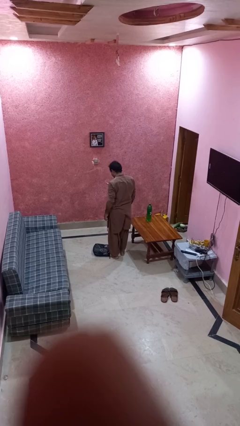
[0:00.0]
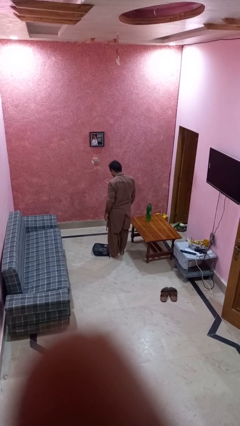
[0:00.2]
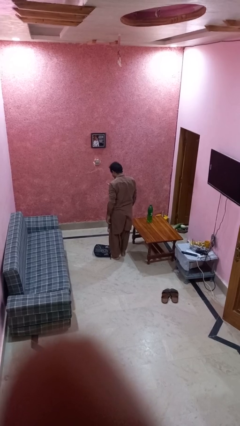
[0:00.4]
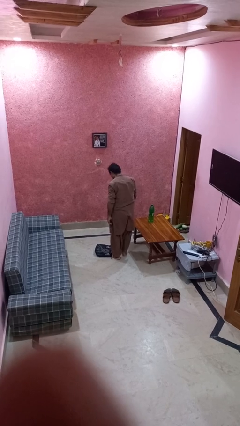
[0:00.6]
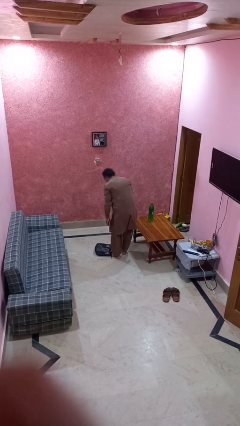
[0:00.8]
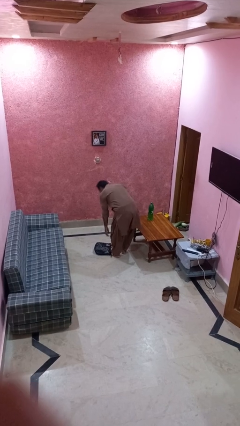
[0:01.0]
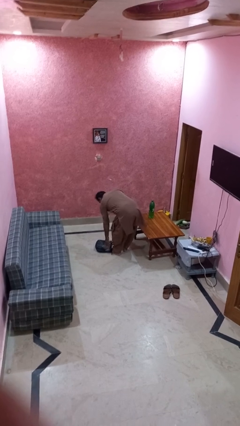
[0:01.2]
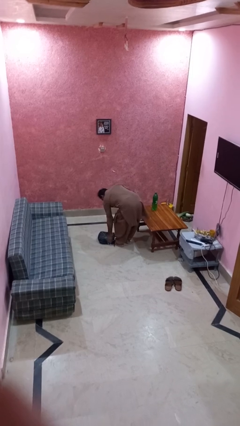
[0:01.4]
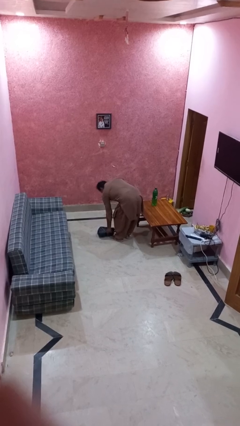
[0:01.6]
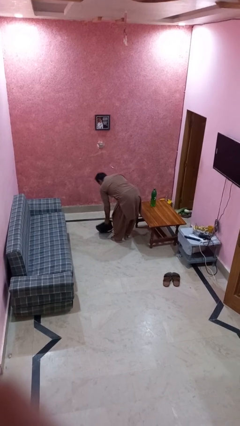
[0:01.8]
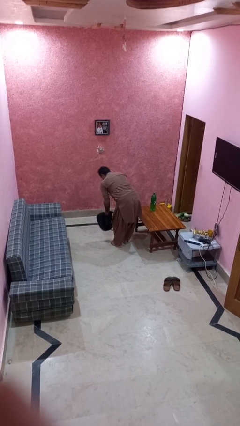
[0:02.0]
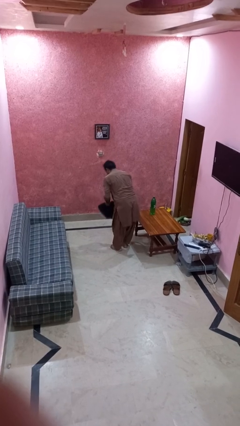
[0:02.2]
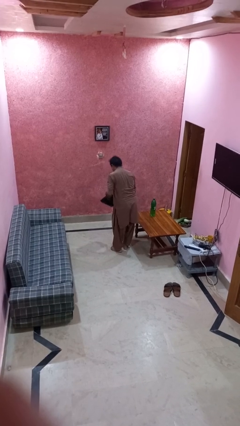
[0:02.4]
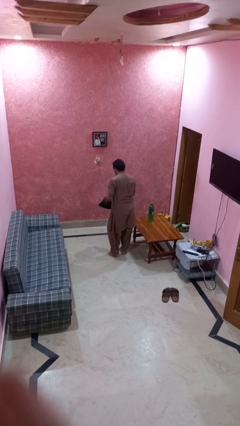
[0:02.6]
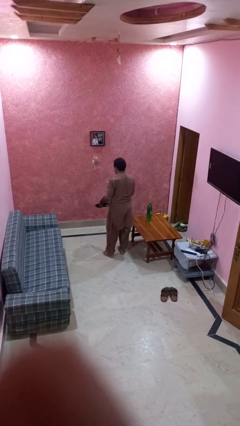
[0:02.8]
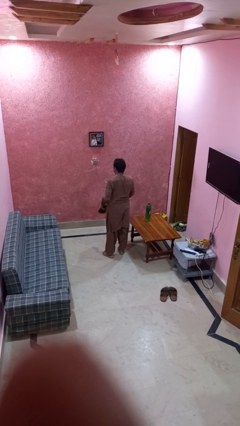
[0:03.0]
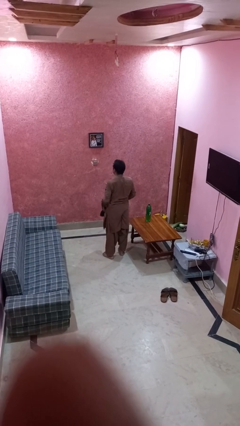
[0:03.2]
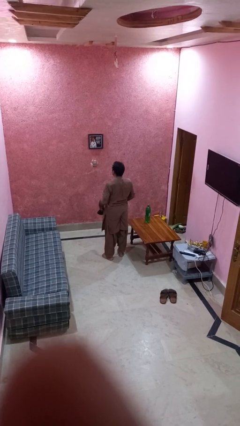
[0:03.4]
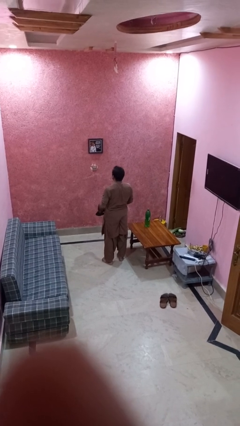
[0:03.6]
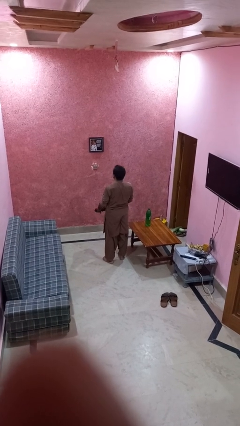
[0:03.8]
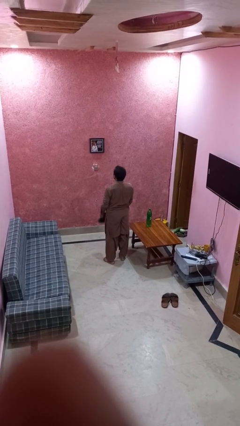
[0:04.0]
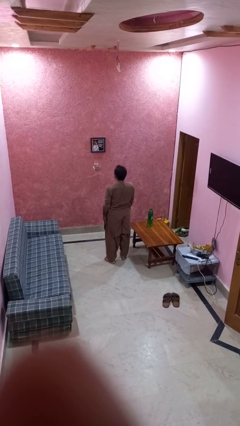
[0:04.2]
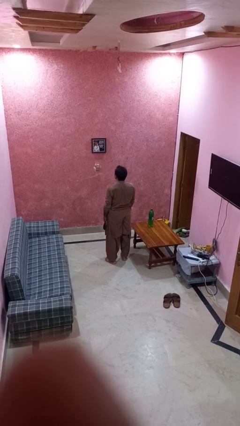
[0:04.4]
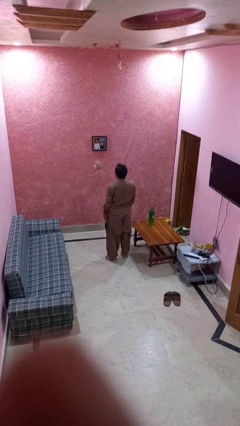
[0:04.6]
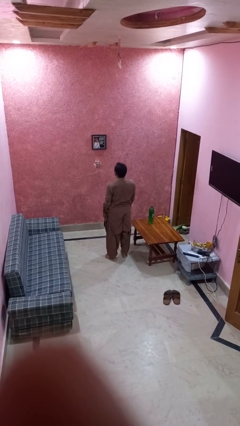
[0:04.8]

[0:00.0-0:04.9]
person picks up object from floor

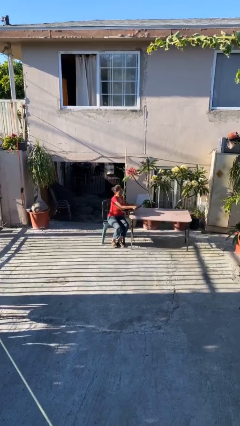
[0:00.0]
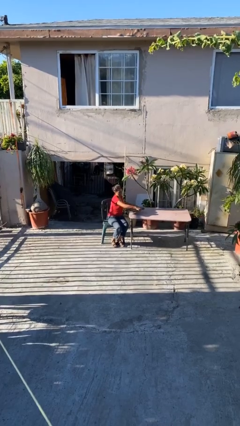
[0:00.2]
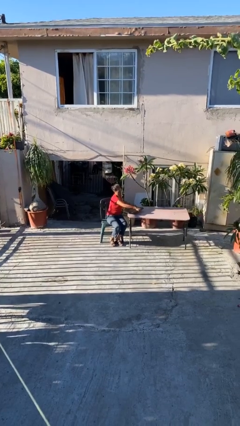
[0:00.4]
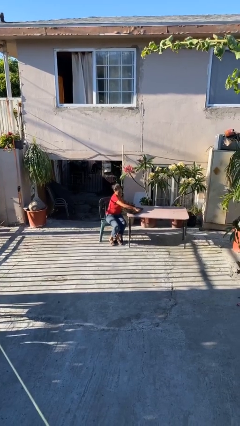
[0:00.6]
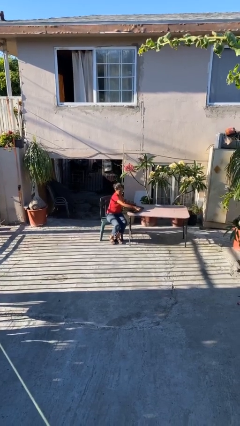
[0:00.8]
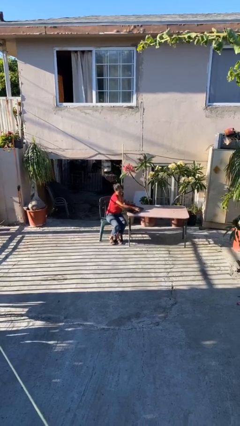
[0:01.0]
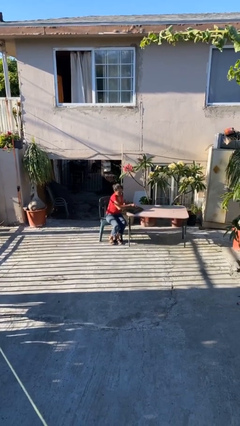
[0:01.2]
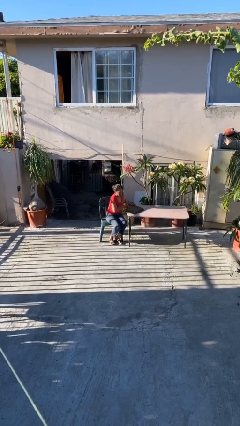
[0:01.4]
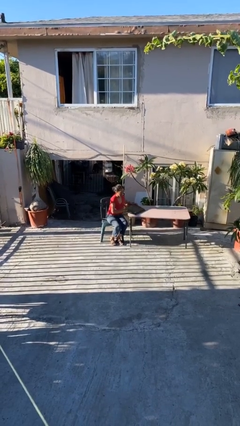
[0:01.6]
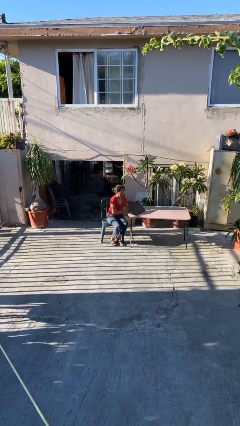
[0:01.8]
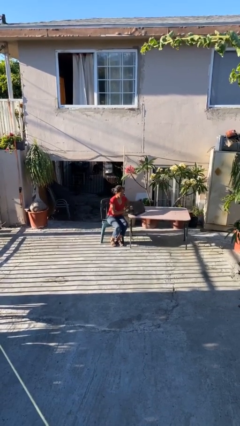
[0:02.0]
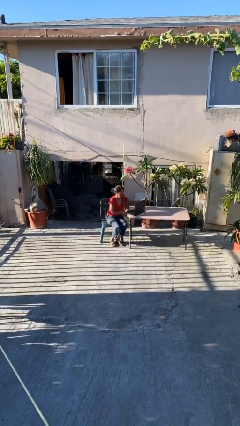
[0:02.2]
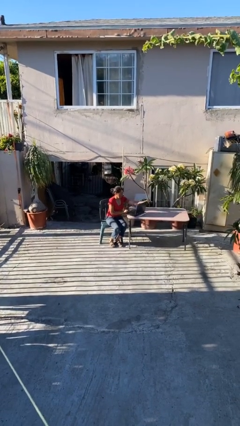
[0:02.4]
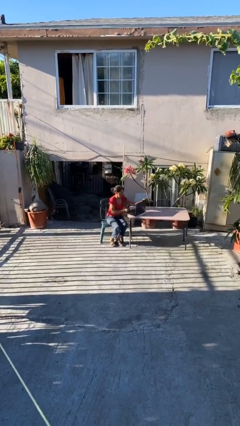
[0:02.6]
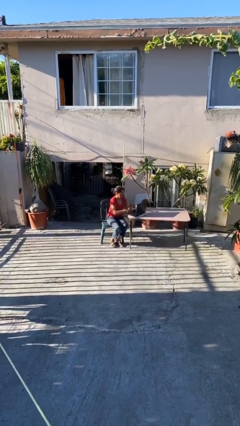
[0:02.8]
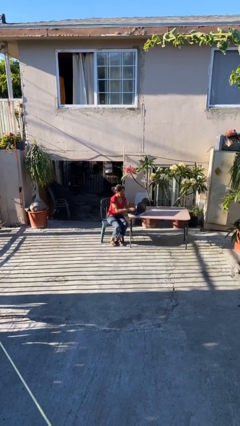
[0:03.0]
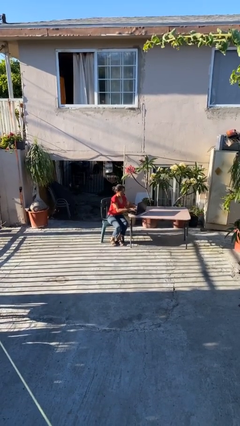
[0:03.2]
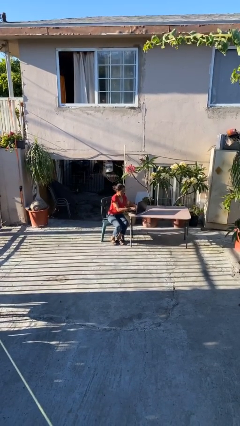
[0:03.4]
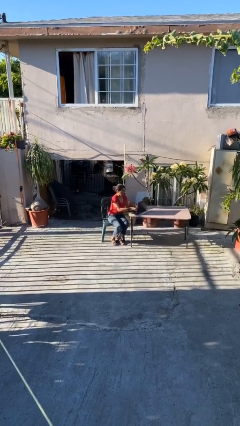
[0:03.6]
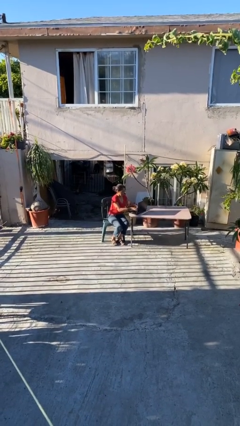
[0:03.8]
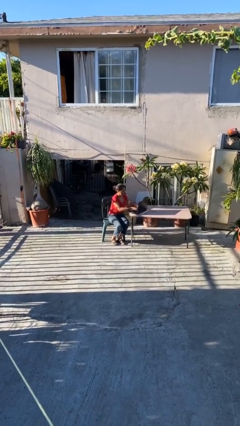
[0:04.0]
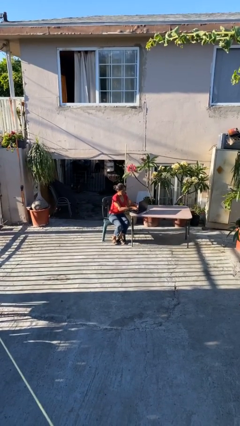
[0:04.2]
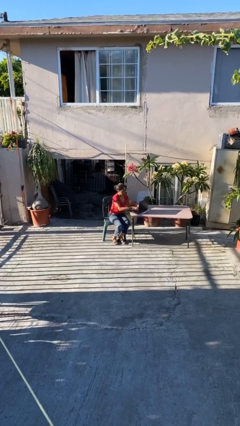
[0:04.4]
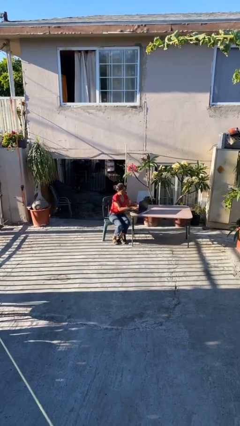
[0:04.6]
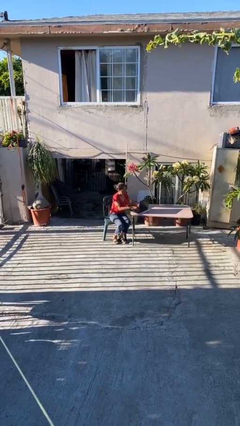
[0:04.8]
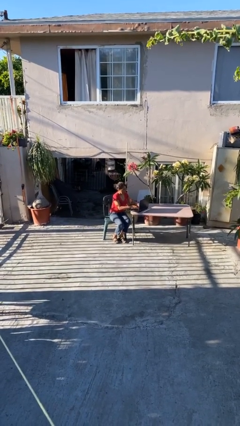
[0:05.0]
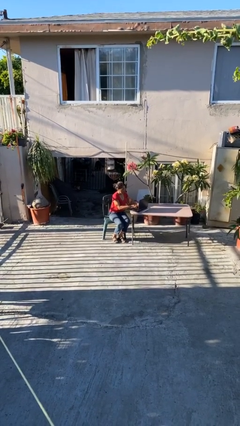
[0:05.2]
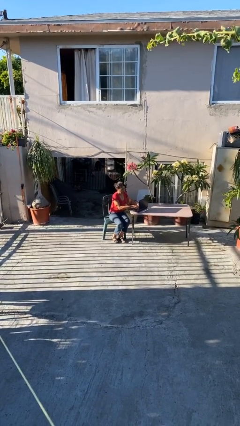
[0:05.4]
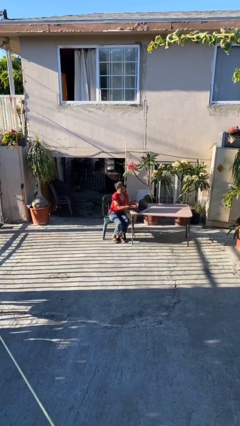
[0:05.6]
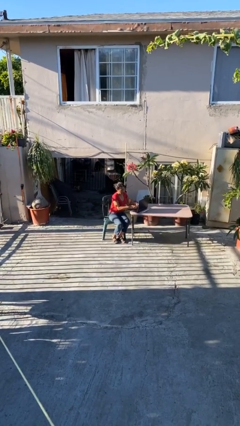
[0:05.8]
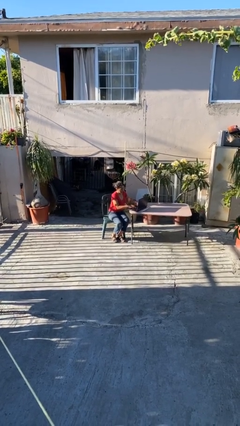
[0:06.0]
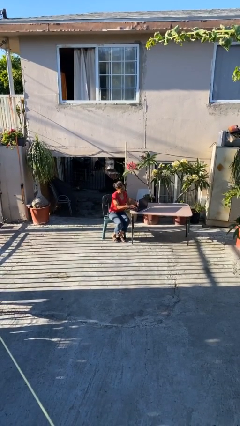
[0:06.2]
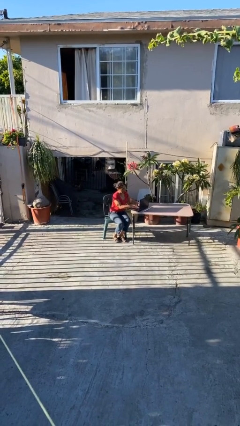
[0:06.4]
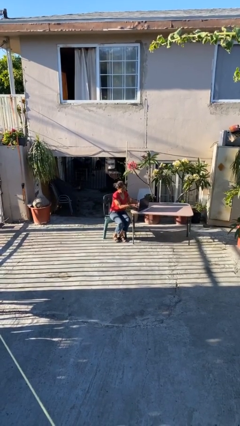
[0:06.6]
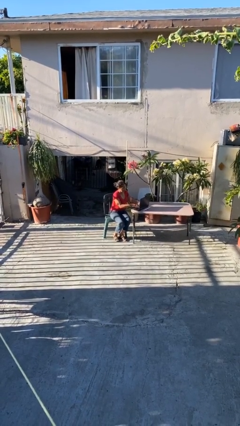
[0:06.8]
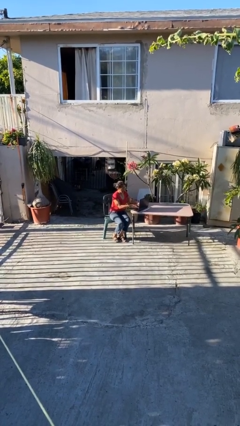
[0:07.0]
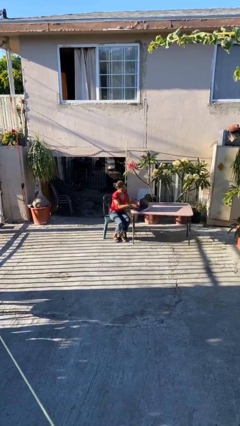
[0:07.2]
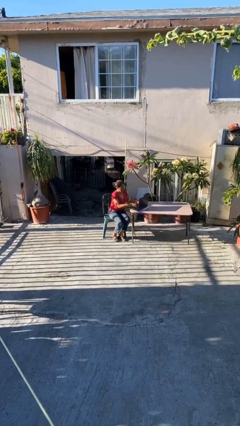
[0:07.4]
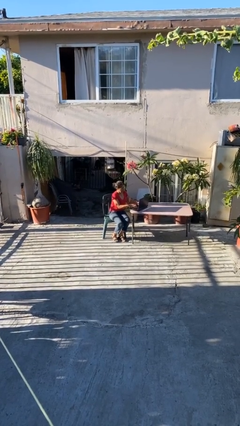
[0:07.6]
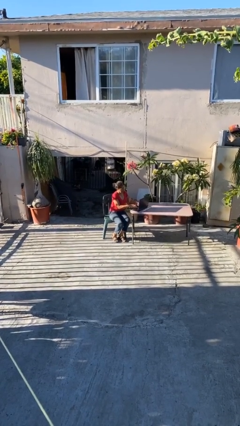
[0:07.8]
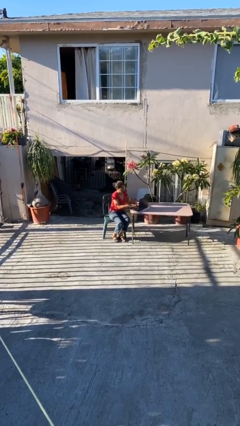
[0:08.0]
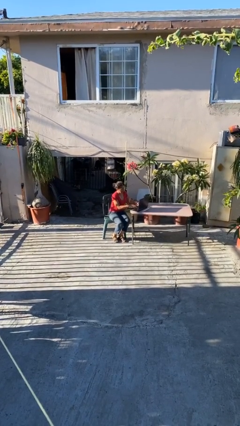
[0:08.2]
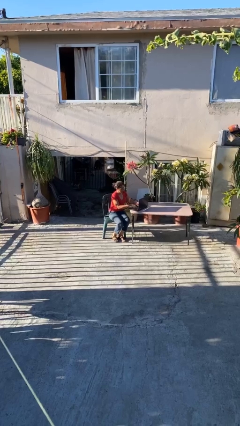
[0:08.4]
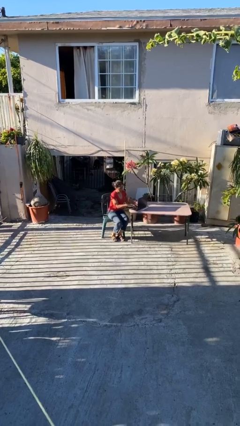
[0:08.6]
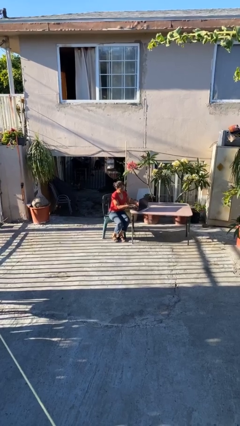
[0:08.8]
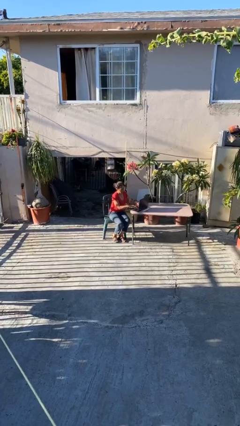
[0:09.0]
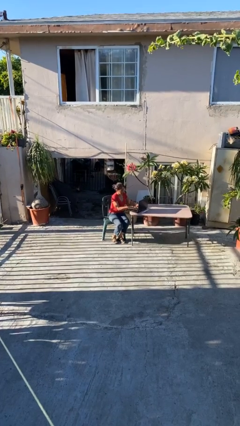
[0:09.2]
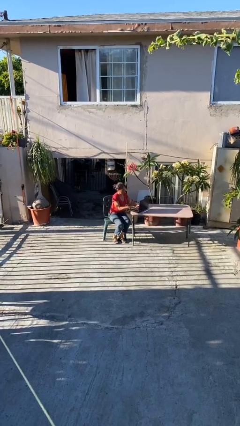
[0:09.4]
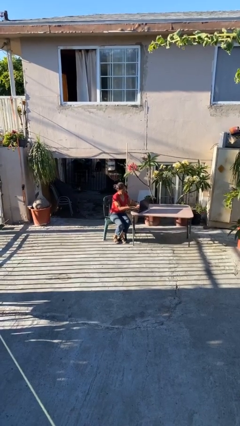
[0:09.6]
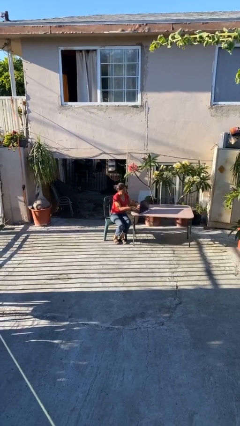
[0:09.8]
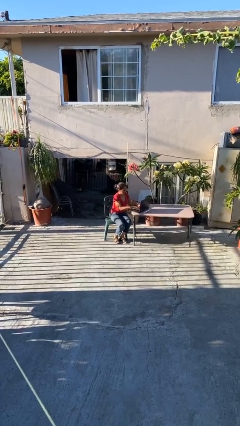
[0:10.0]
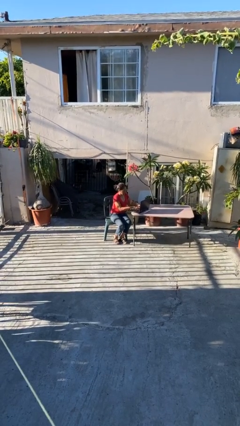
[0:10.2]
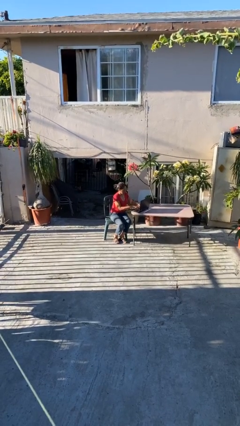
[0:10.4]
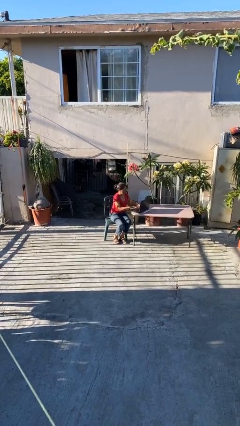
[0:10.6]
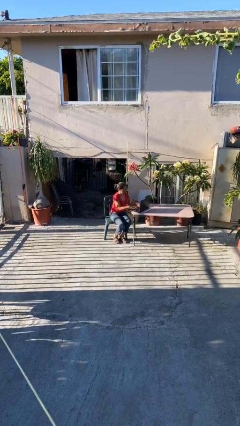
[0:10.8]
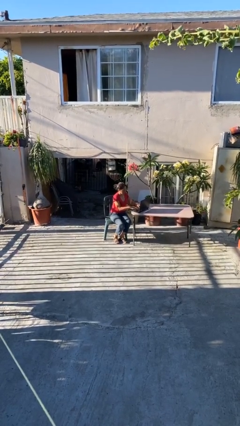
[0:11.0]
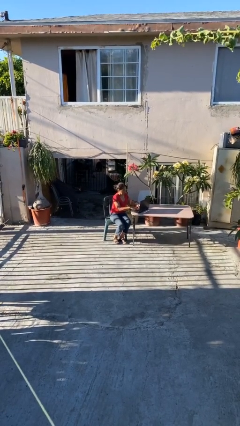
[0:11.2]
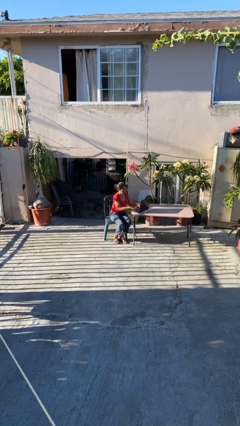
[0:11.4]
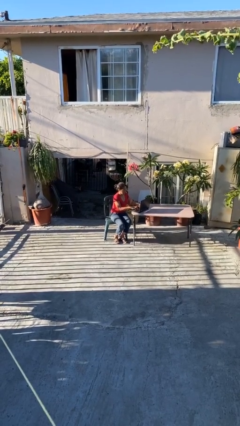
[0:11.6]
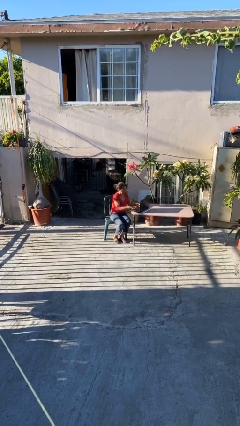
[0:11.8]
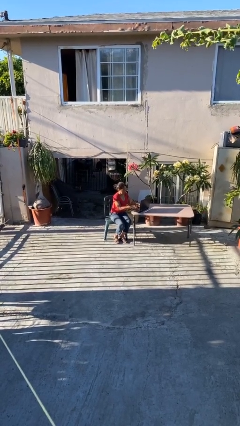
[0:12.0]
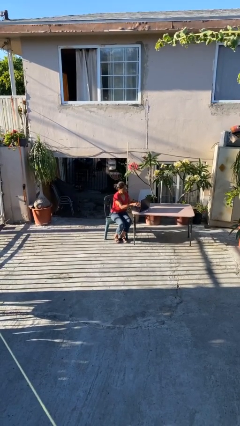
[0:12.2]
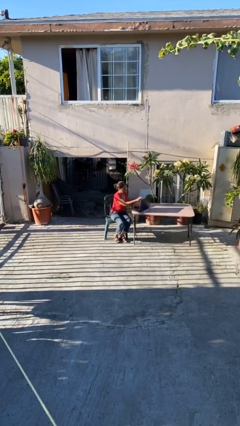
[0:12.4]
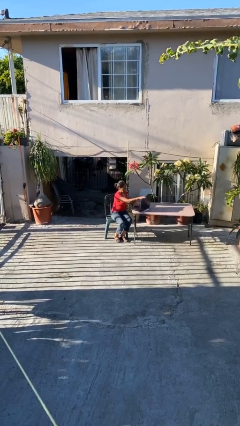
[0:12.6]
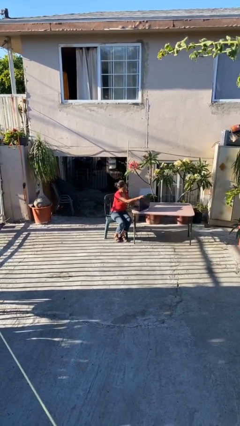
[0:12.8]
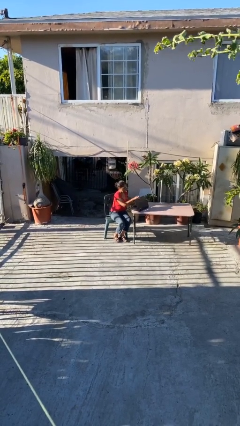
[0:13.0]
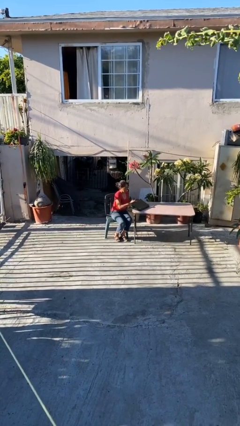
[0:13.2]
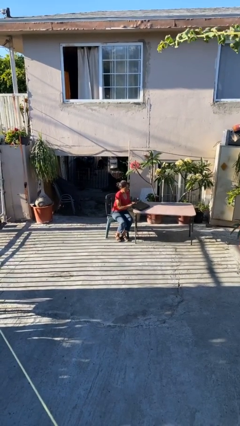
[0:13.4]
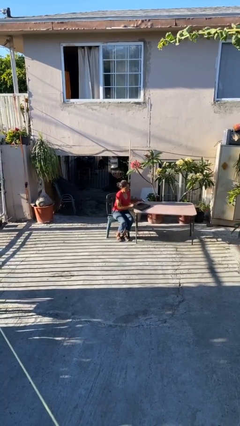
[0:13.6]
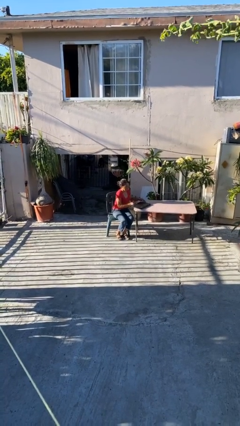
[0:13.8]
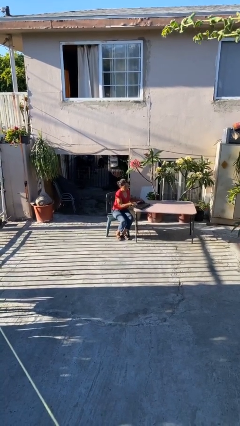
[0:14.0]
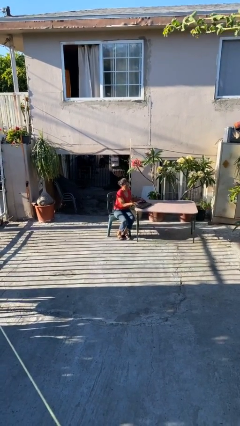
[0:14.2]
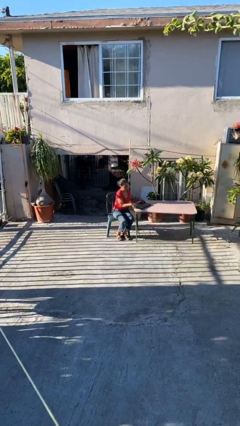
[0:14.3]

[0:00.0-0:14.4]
person interacts with laptop
